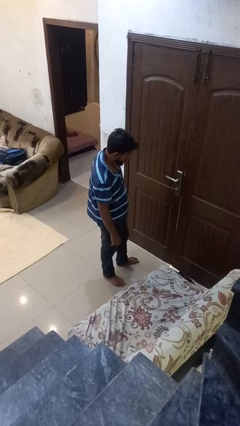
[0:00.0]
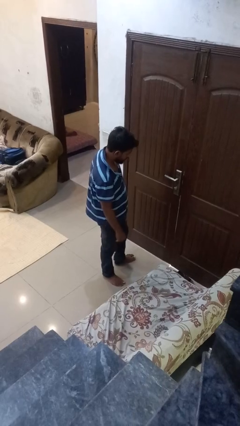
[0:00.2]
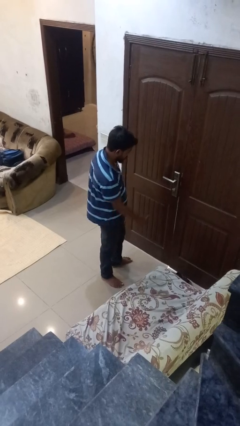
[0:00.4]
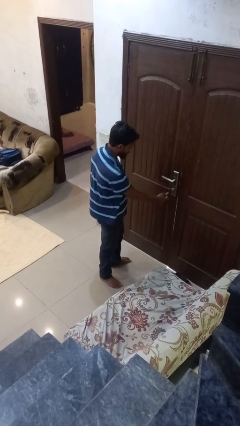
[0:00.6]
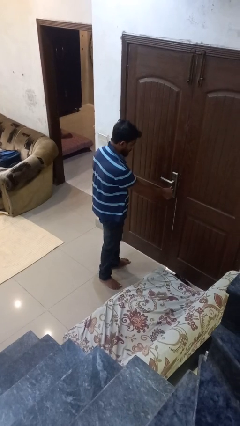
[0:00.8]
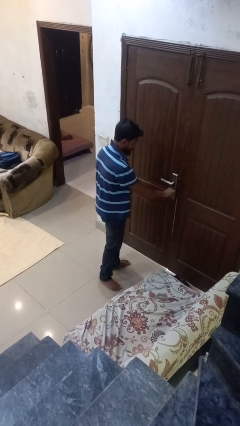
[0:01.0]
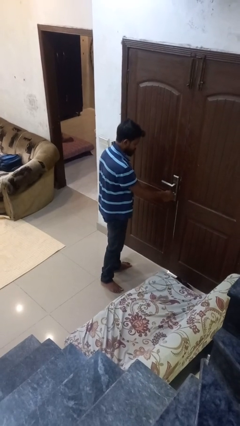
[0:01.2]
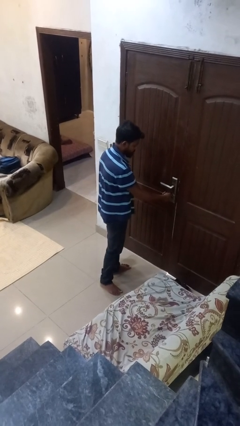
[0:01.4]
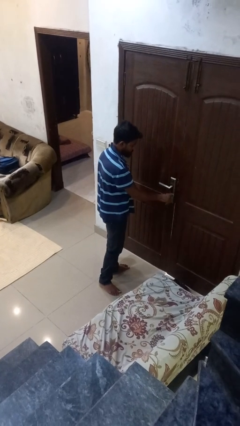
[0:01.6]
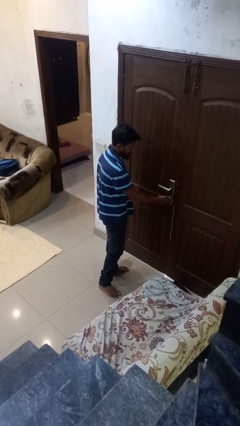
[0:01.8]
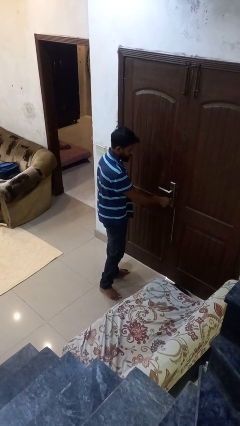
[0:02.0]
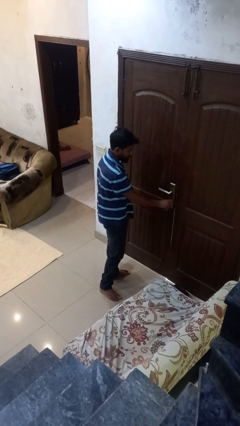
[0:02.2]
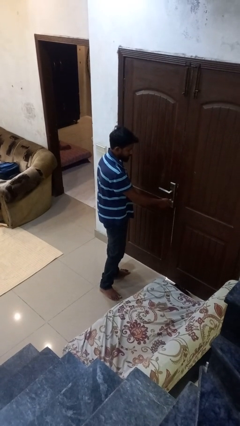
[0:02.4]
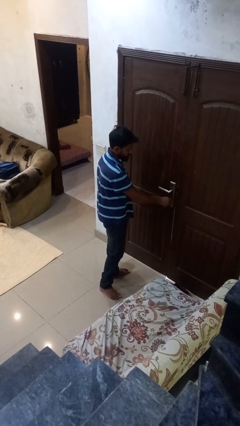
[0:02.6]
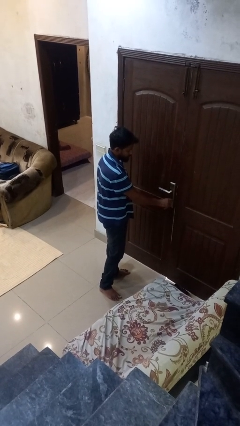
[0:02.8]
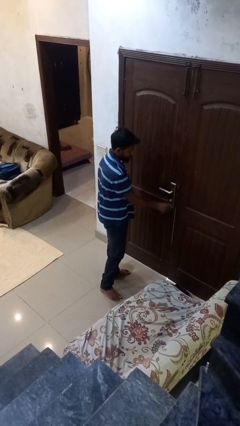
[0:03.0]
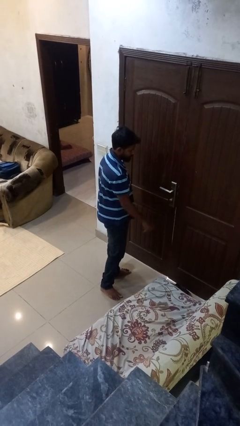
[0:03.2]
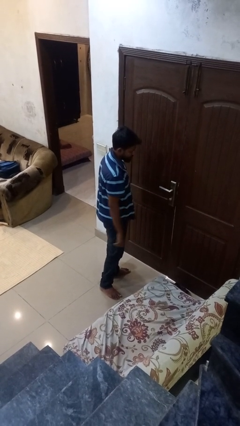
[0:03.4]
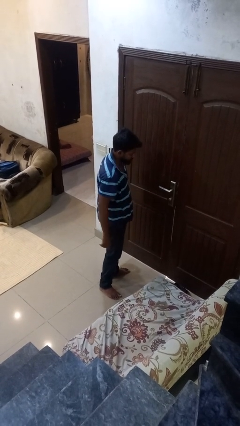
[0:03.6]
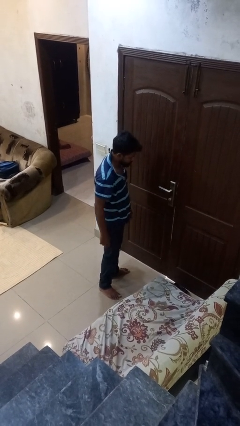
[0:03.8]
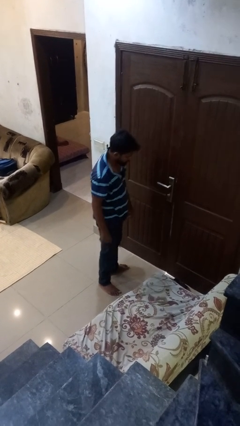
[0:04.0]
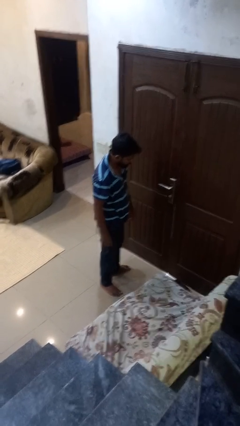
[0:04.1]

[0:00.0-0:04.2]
person unlocks door with keys

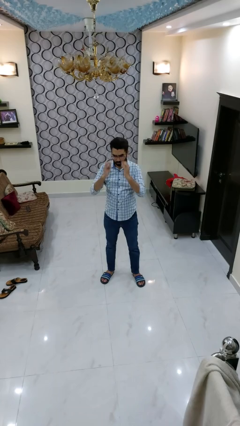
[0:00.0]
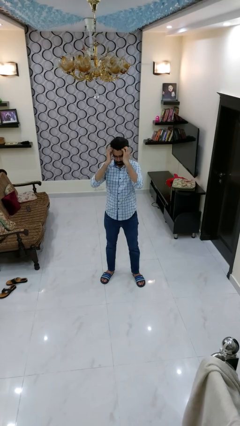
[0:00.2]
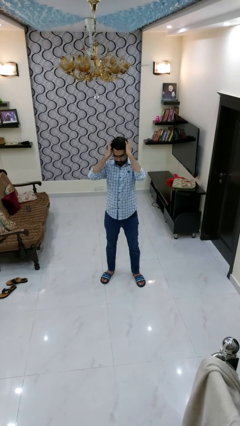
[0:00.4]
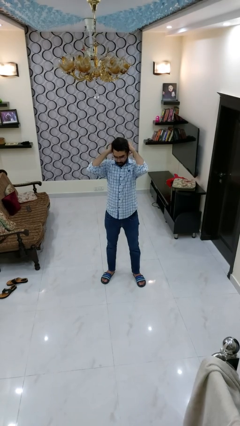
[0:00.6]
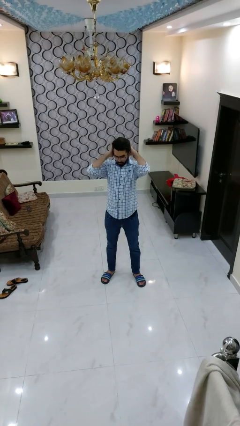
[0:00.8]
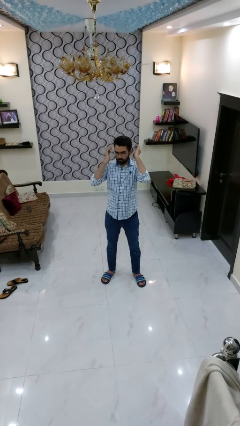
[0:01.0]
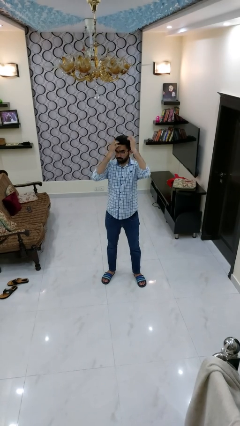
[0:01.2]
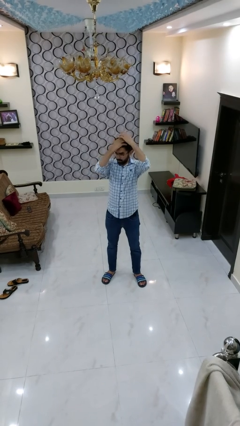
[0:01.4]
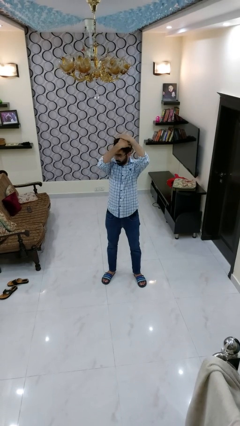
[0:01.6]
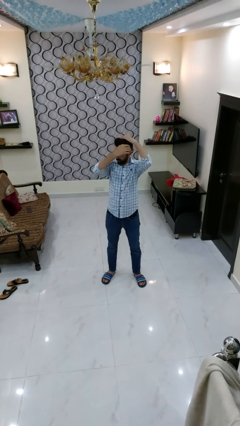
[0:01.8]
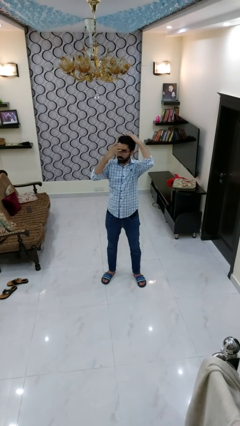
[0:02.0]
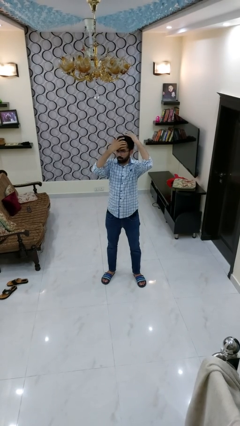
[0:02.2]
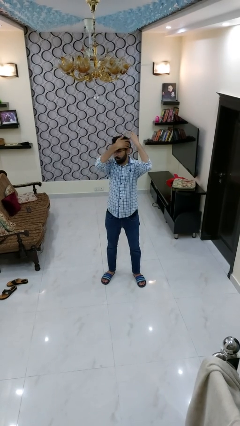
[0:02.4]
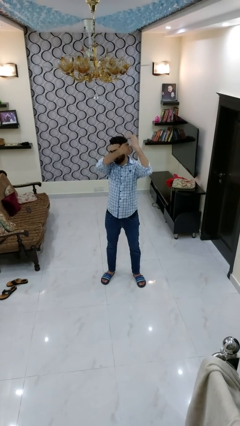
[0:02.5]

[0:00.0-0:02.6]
person strokes hair

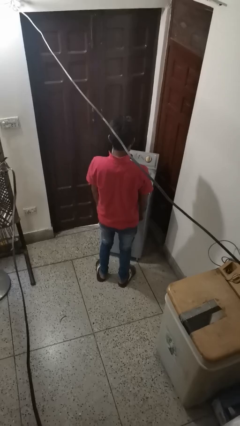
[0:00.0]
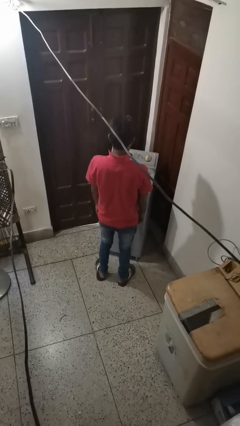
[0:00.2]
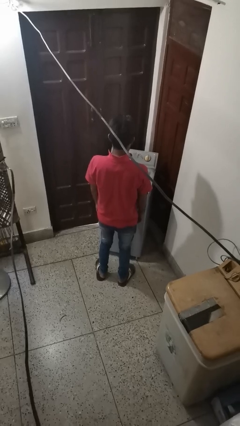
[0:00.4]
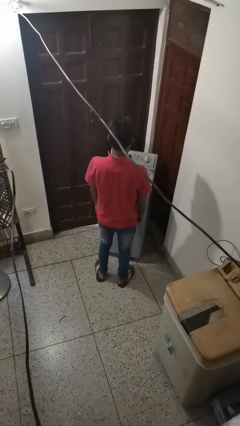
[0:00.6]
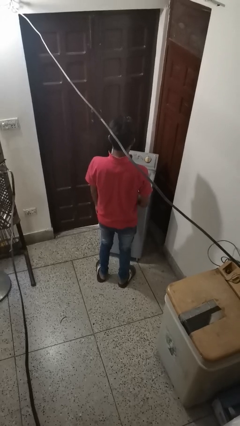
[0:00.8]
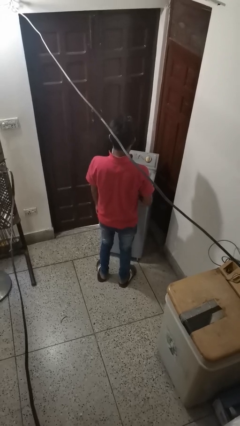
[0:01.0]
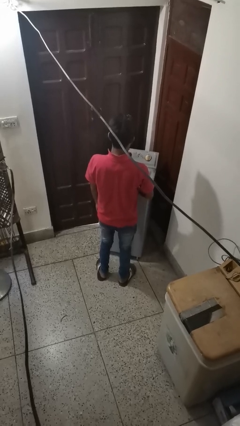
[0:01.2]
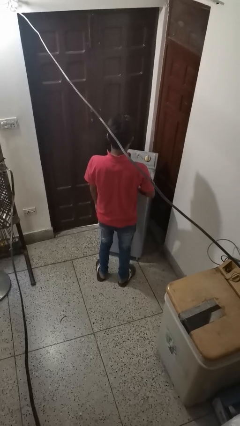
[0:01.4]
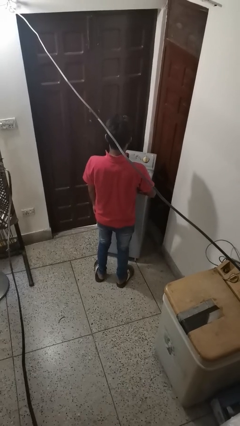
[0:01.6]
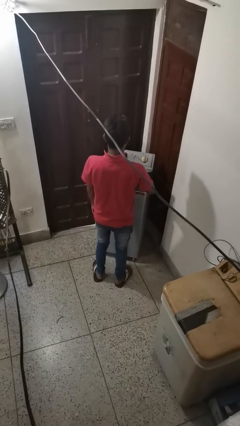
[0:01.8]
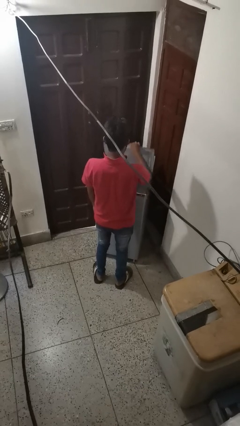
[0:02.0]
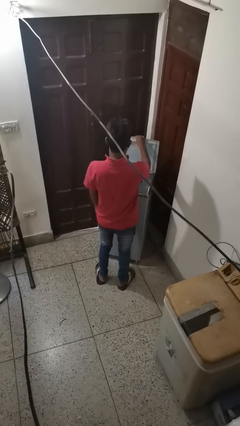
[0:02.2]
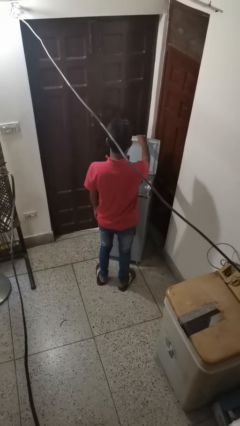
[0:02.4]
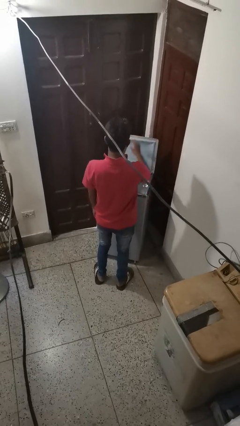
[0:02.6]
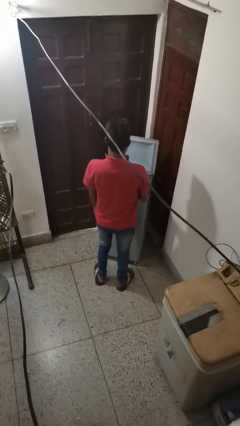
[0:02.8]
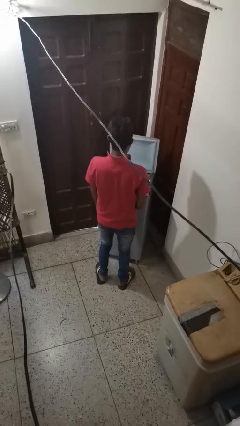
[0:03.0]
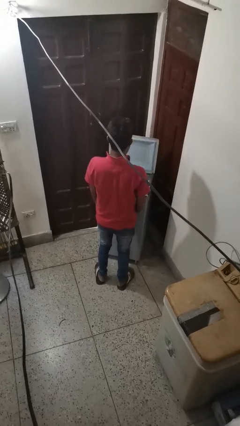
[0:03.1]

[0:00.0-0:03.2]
person opens clothes washer

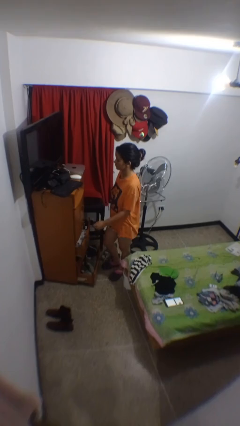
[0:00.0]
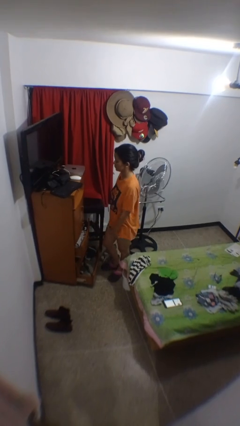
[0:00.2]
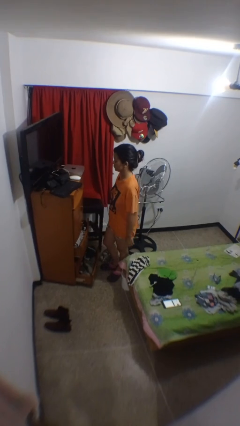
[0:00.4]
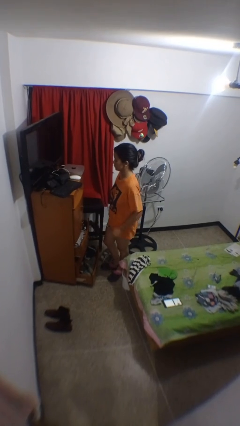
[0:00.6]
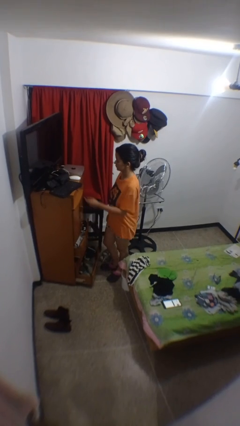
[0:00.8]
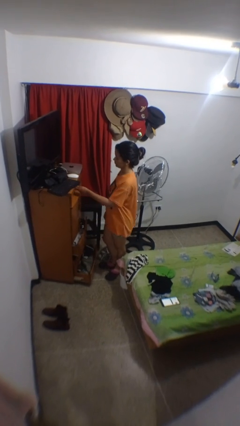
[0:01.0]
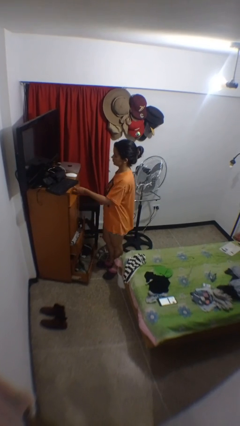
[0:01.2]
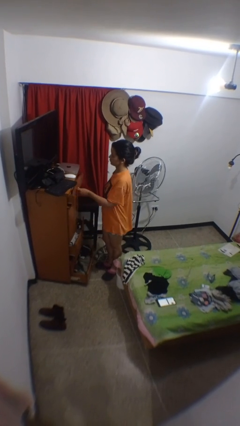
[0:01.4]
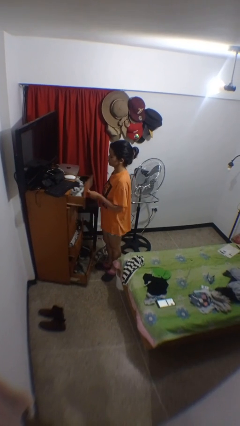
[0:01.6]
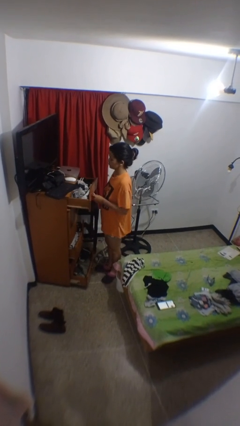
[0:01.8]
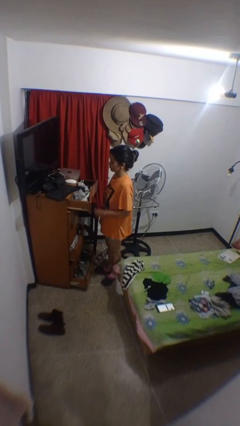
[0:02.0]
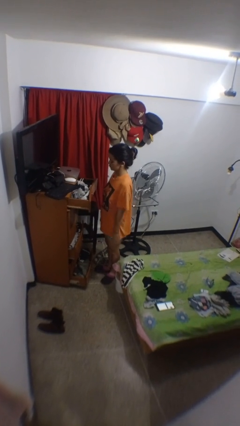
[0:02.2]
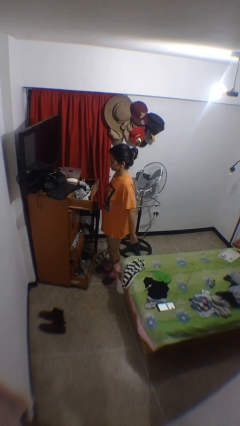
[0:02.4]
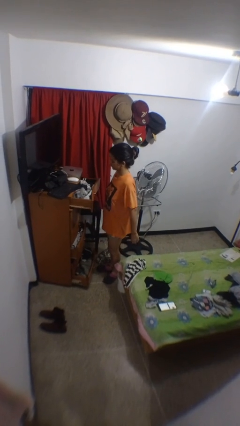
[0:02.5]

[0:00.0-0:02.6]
person opens dresser drawer

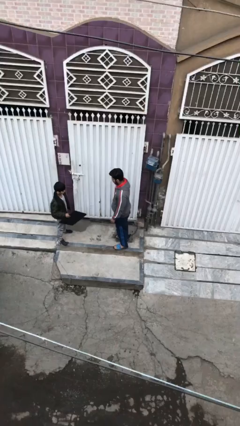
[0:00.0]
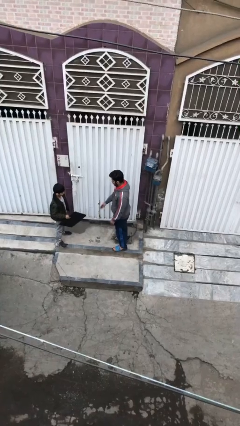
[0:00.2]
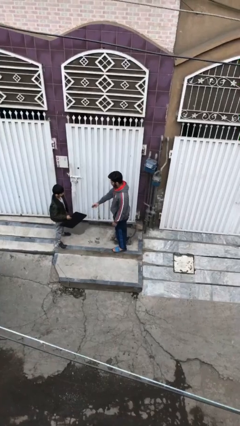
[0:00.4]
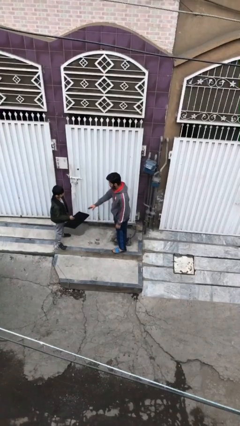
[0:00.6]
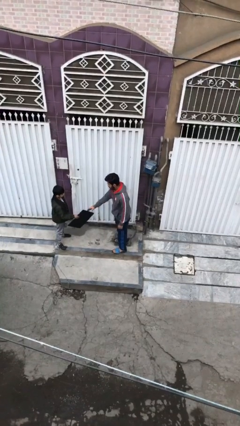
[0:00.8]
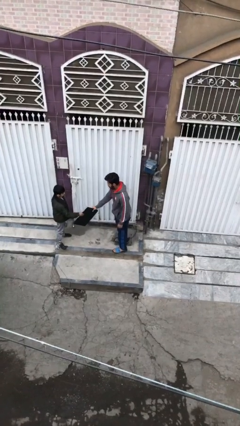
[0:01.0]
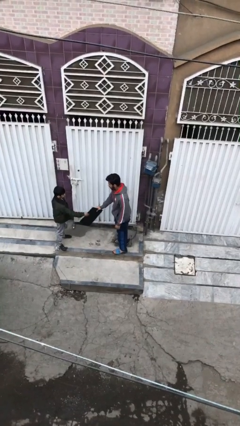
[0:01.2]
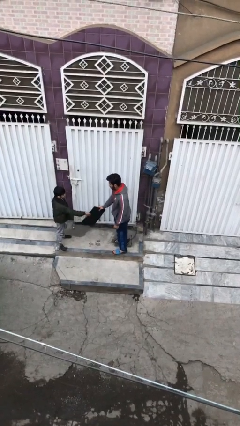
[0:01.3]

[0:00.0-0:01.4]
person transfers object to person

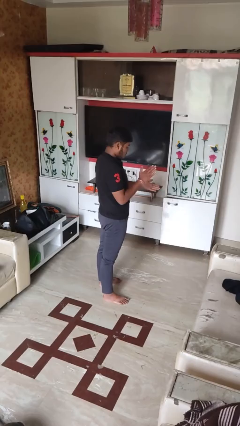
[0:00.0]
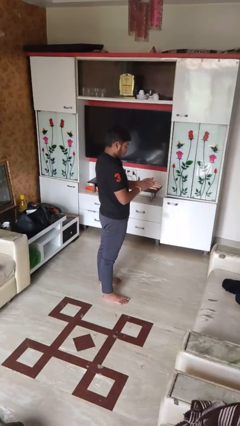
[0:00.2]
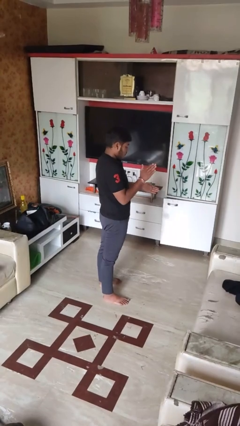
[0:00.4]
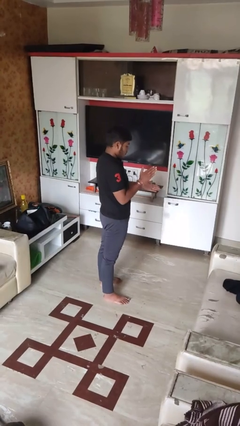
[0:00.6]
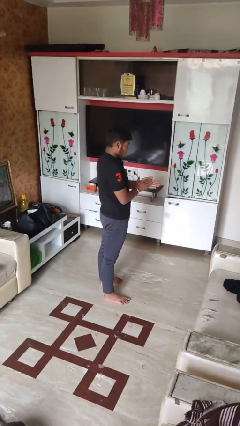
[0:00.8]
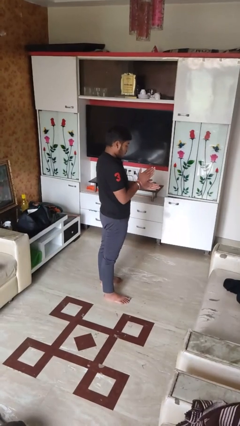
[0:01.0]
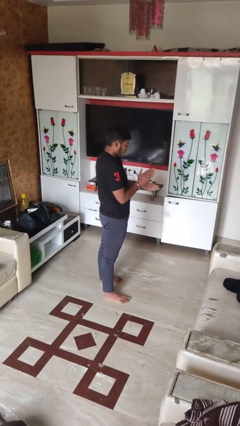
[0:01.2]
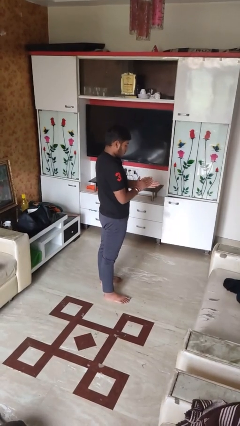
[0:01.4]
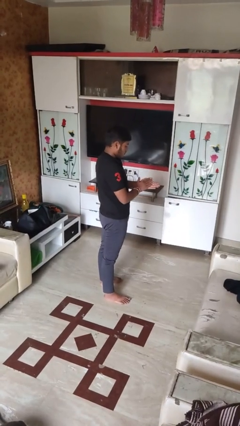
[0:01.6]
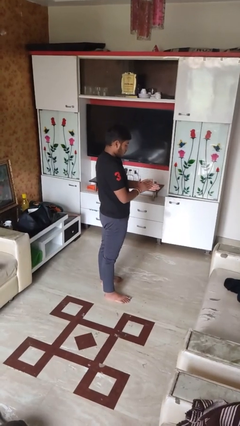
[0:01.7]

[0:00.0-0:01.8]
person claps hands

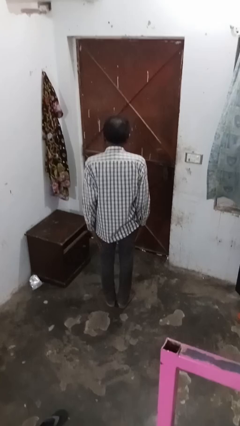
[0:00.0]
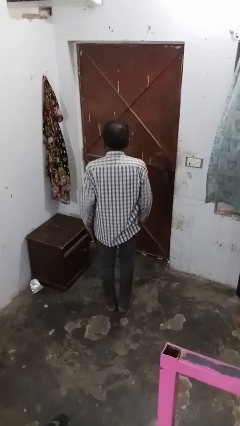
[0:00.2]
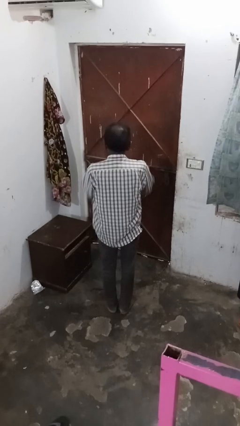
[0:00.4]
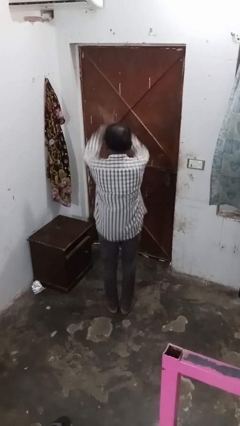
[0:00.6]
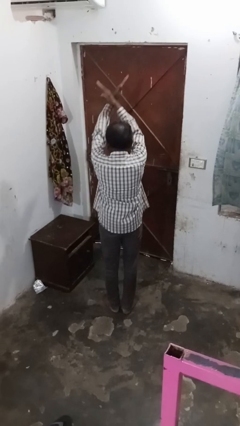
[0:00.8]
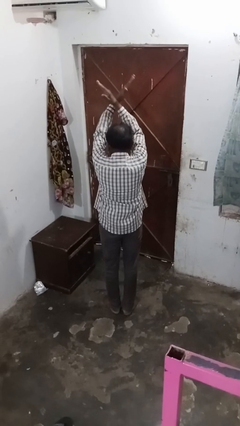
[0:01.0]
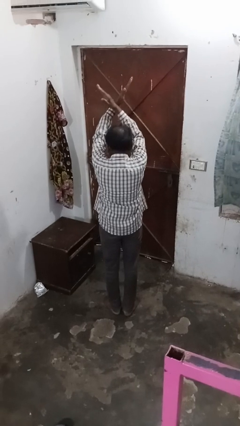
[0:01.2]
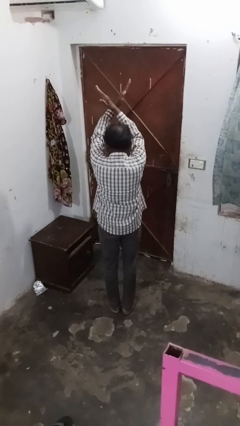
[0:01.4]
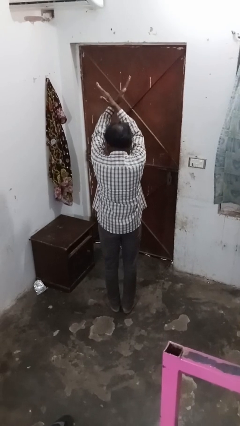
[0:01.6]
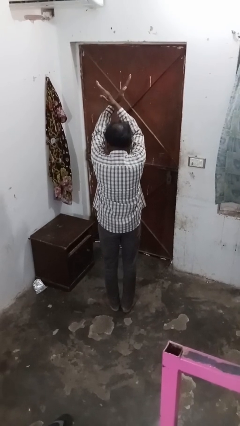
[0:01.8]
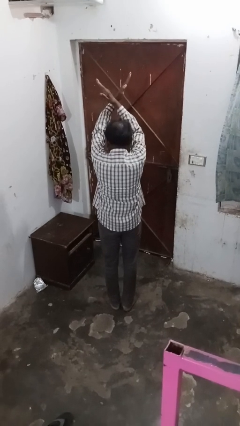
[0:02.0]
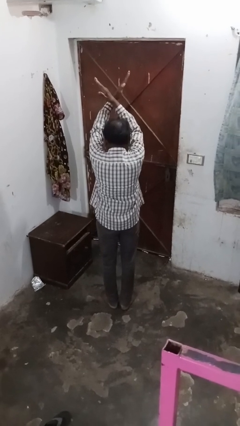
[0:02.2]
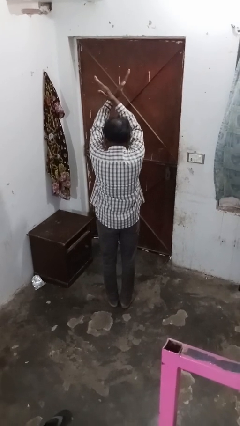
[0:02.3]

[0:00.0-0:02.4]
person gestures arms x
